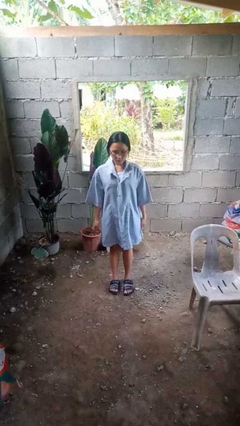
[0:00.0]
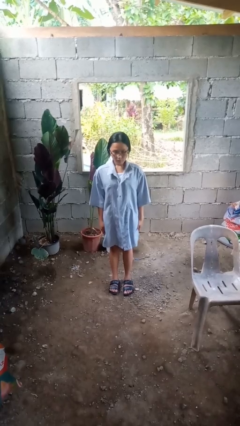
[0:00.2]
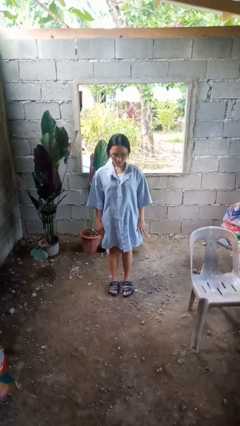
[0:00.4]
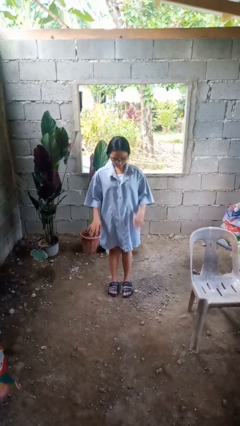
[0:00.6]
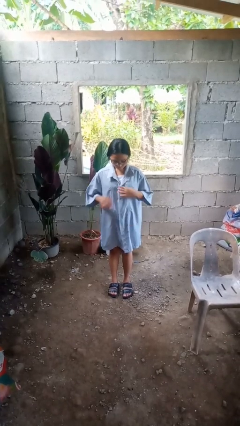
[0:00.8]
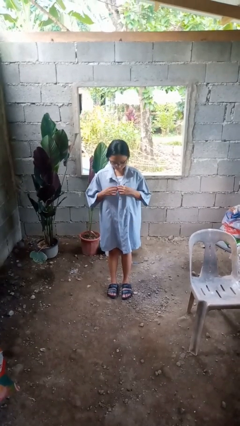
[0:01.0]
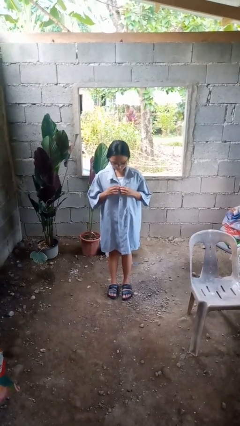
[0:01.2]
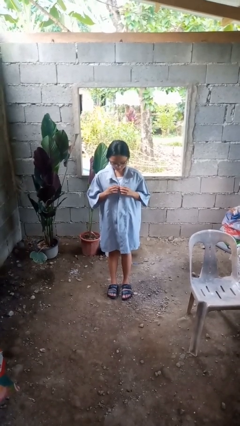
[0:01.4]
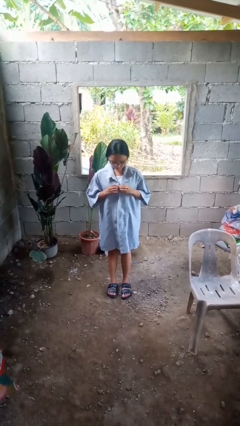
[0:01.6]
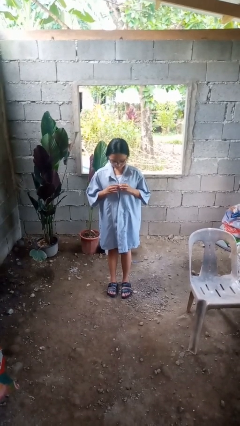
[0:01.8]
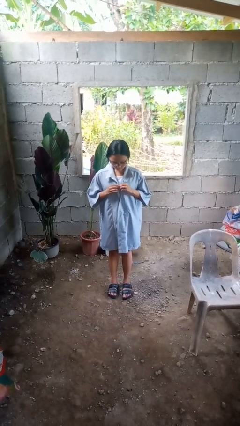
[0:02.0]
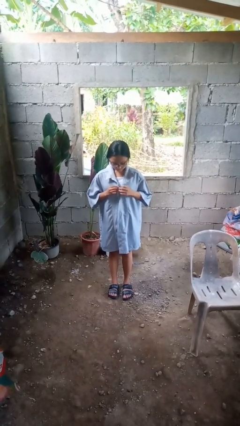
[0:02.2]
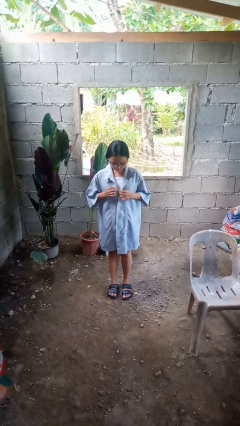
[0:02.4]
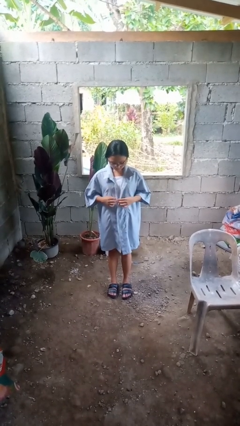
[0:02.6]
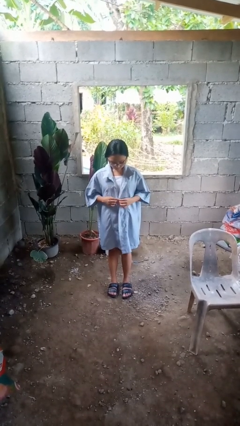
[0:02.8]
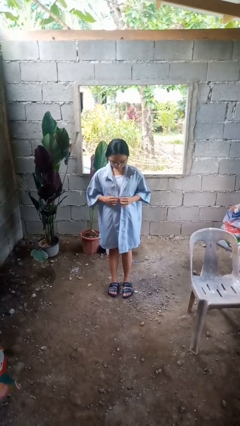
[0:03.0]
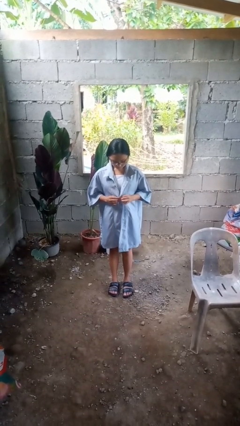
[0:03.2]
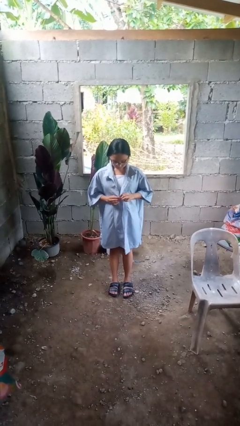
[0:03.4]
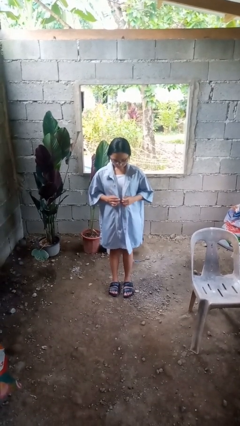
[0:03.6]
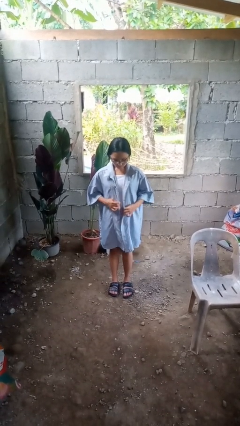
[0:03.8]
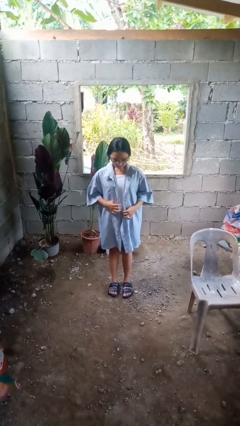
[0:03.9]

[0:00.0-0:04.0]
person unbuttons shirt

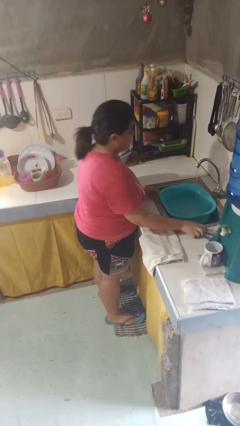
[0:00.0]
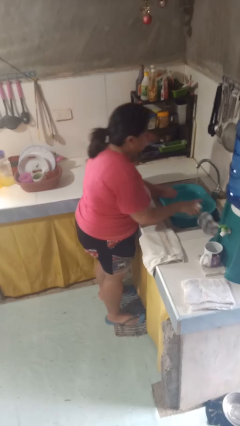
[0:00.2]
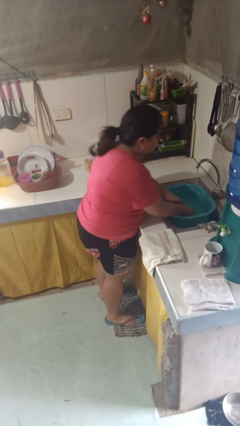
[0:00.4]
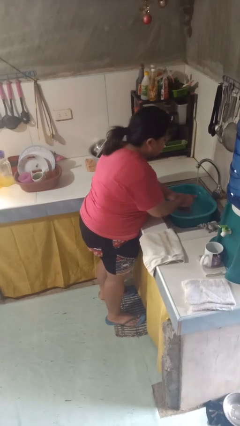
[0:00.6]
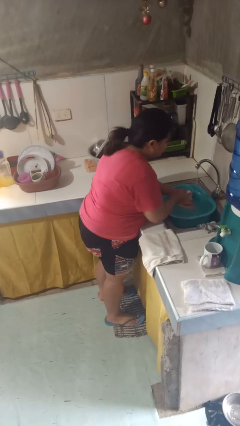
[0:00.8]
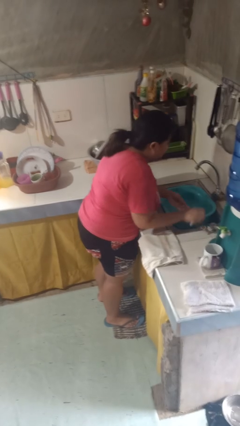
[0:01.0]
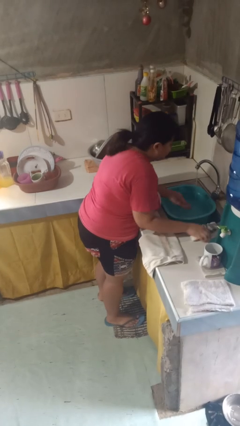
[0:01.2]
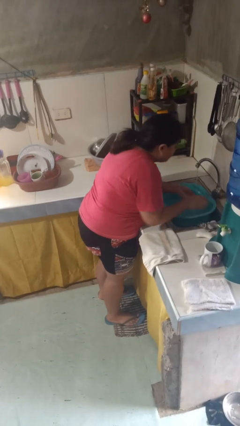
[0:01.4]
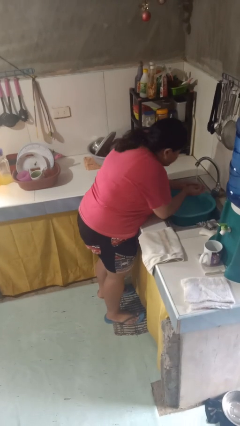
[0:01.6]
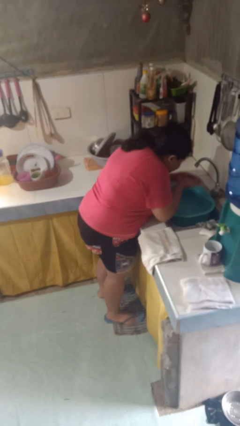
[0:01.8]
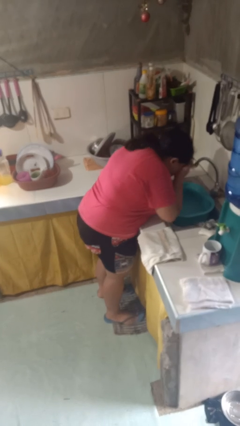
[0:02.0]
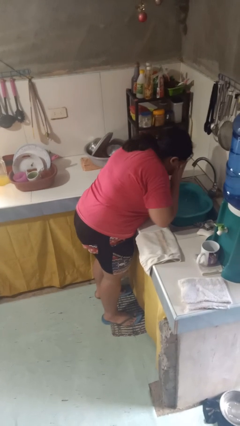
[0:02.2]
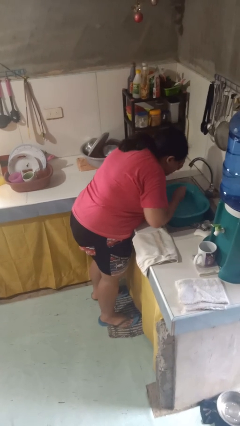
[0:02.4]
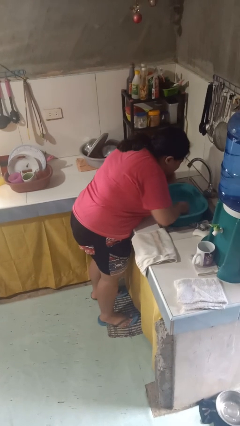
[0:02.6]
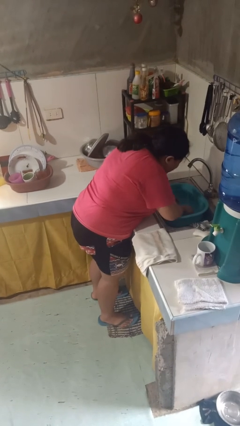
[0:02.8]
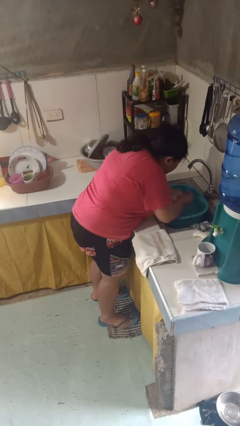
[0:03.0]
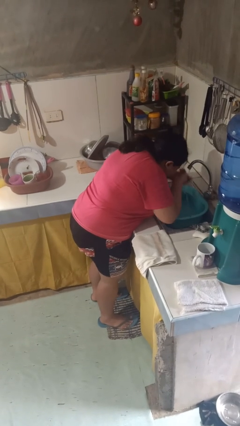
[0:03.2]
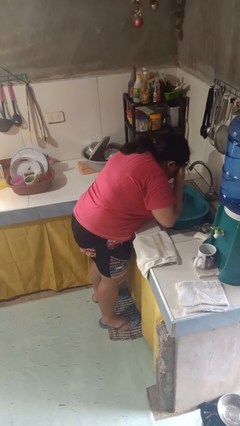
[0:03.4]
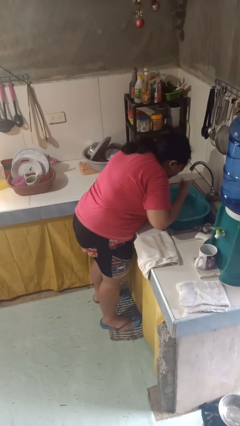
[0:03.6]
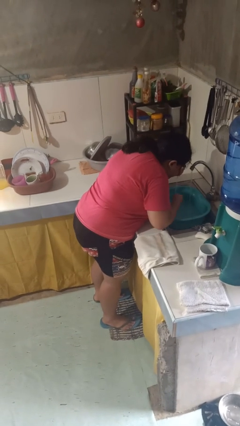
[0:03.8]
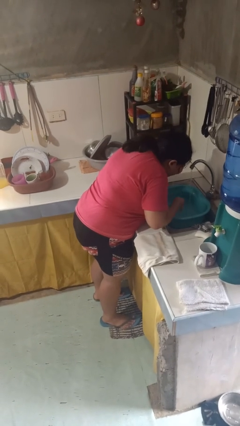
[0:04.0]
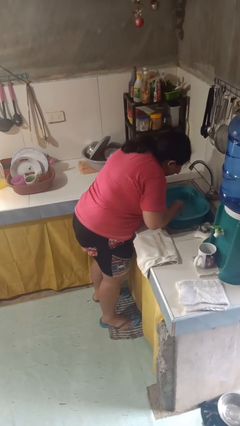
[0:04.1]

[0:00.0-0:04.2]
person washes face

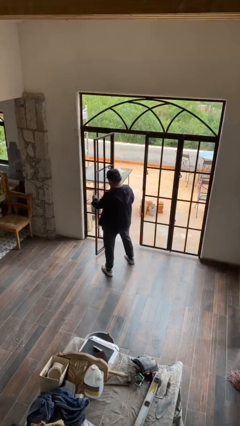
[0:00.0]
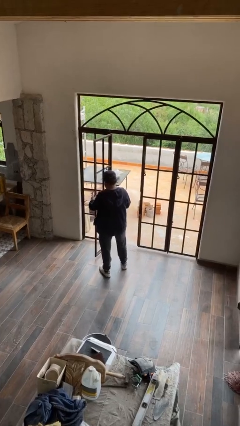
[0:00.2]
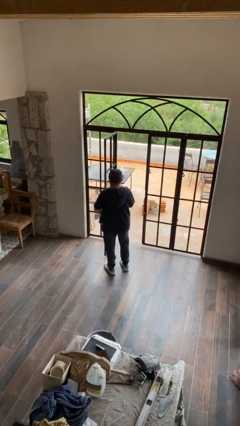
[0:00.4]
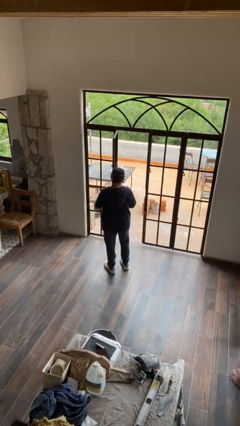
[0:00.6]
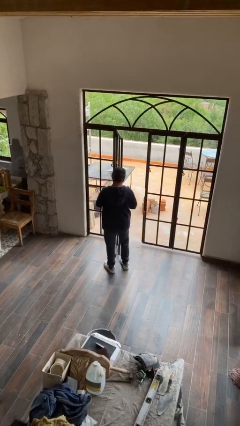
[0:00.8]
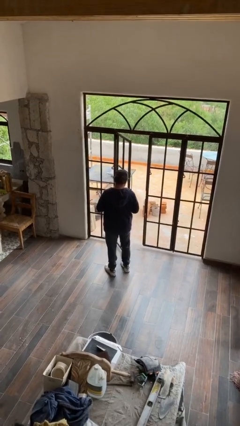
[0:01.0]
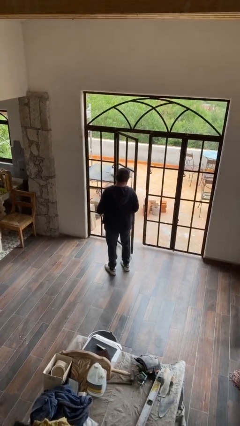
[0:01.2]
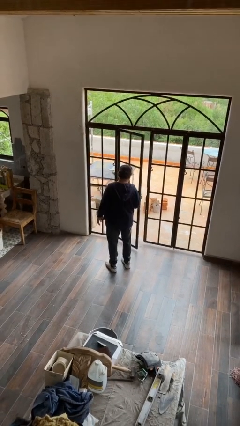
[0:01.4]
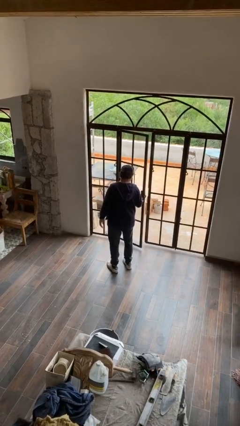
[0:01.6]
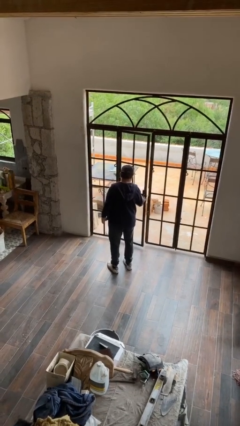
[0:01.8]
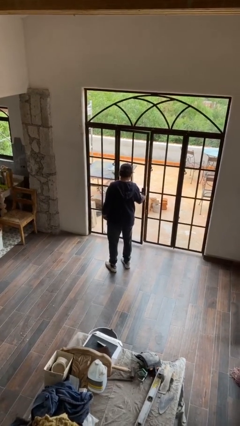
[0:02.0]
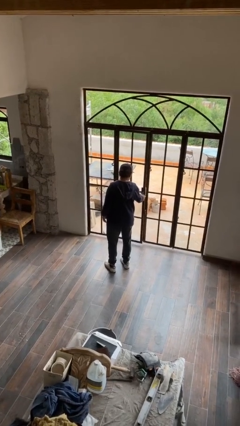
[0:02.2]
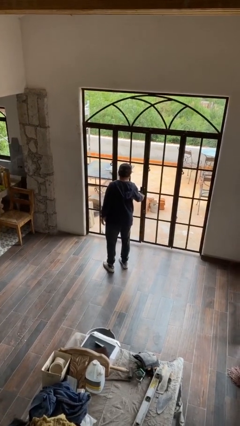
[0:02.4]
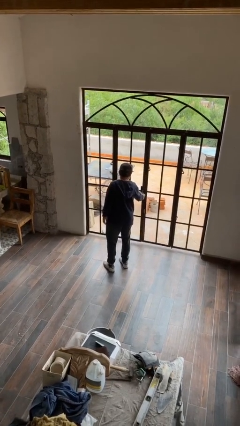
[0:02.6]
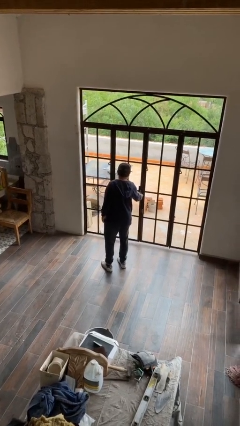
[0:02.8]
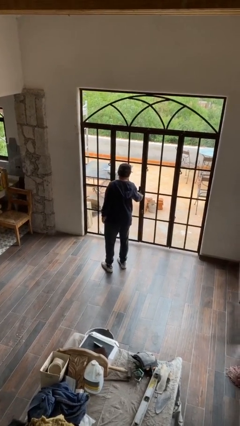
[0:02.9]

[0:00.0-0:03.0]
person closes facility door

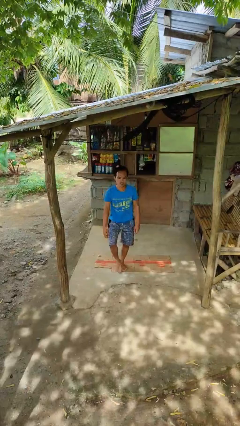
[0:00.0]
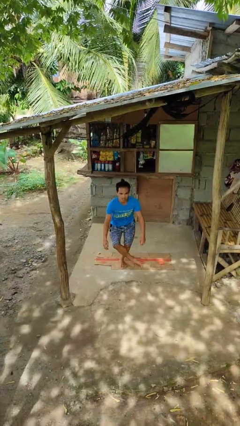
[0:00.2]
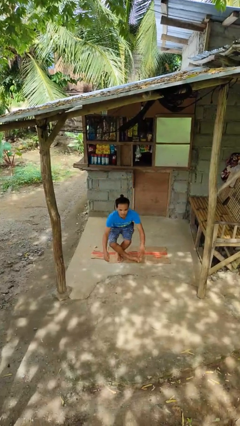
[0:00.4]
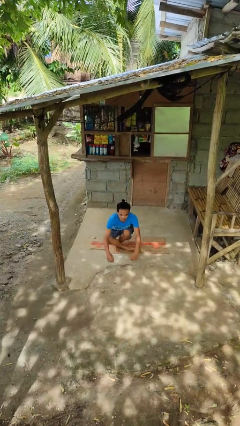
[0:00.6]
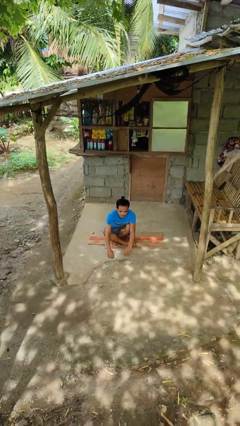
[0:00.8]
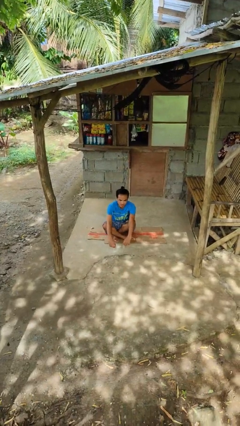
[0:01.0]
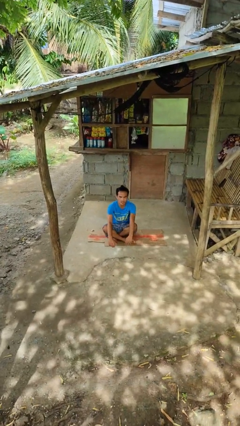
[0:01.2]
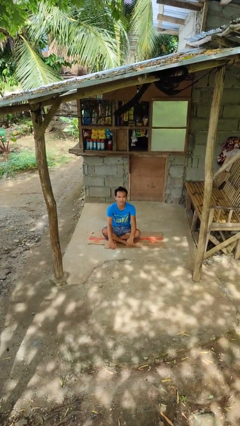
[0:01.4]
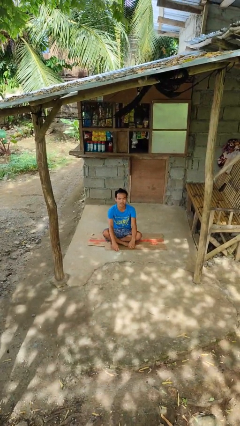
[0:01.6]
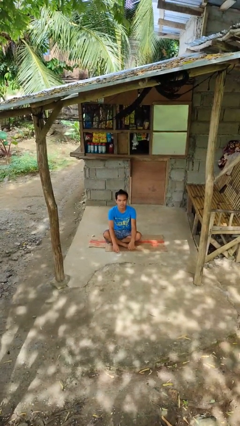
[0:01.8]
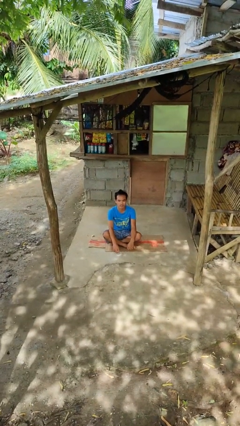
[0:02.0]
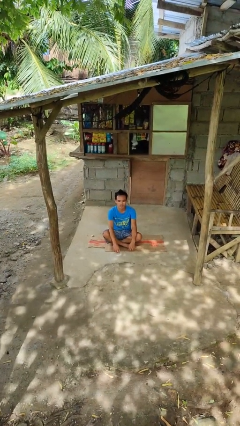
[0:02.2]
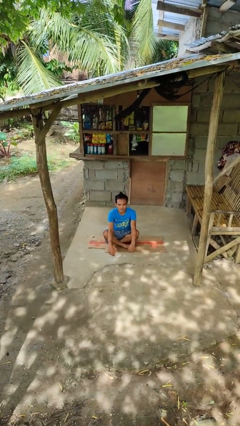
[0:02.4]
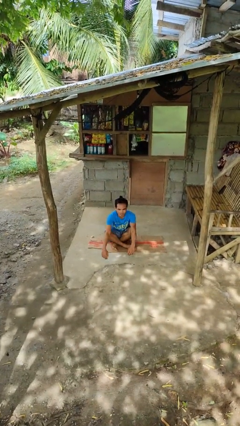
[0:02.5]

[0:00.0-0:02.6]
person sits crisscross

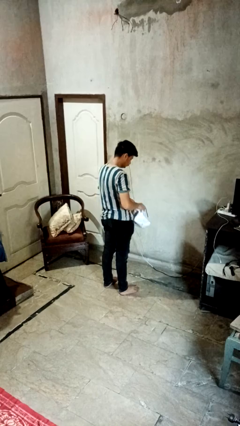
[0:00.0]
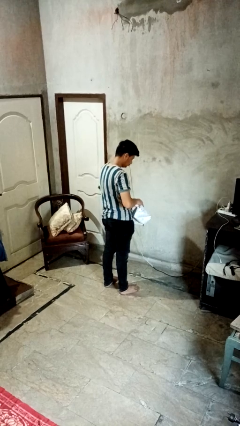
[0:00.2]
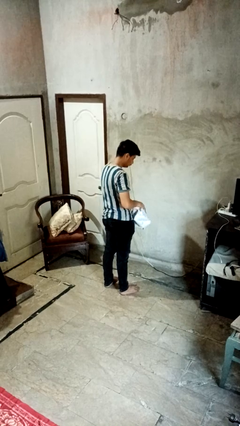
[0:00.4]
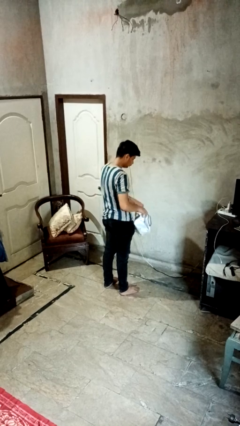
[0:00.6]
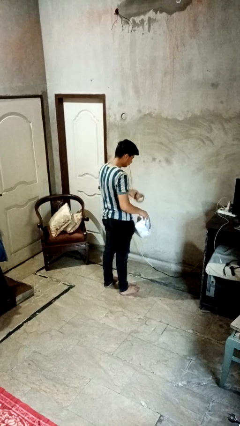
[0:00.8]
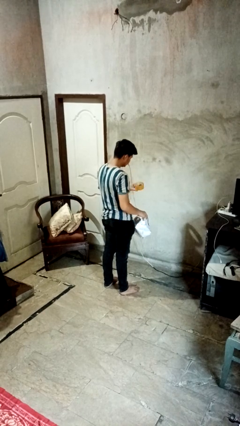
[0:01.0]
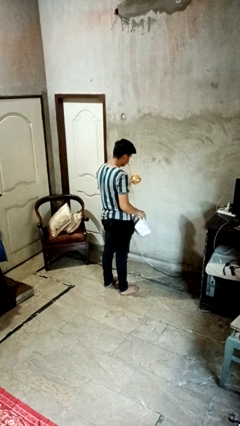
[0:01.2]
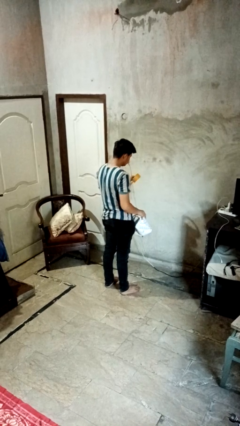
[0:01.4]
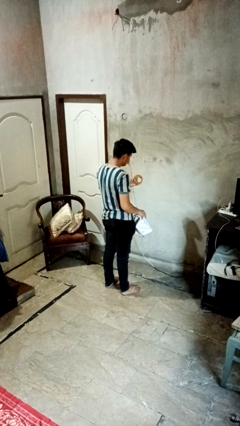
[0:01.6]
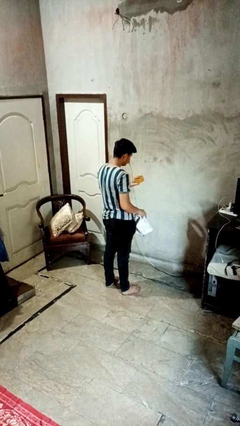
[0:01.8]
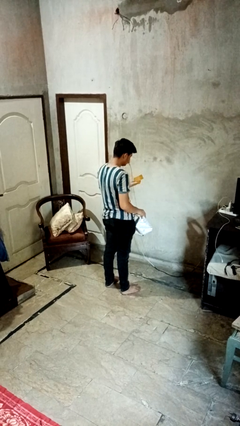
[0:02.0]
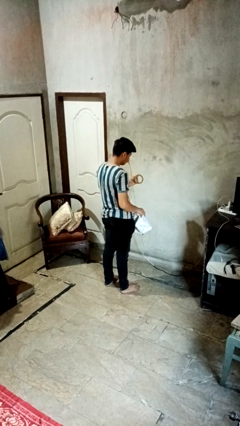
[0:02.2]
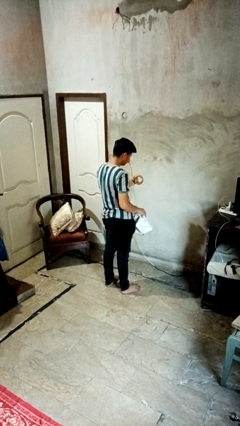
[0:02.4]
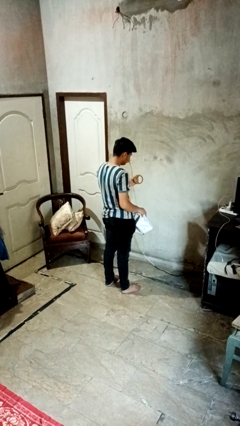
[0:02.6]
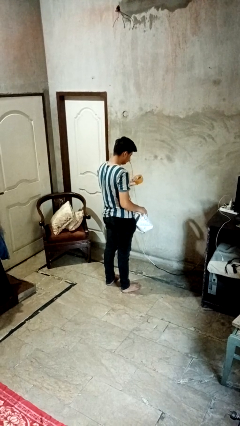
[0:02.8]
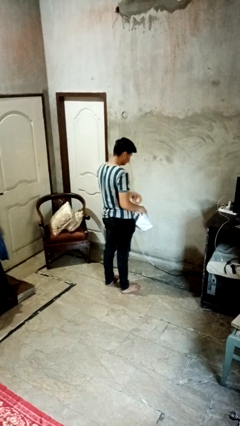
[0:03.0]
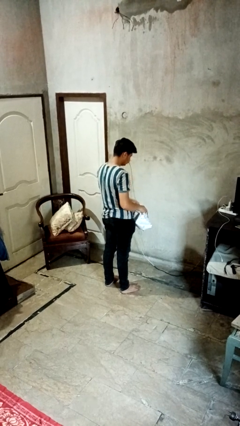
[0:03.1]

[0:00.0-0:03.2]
person searches in bag
